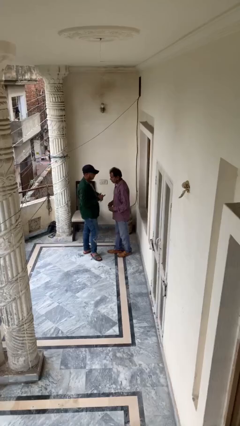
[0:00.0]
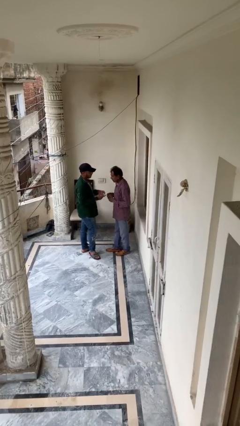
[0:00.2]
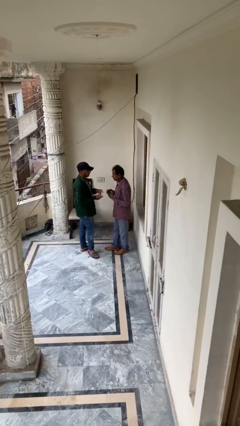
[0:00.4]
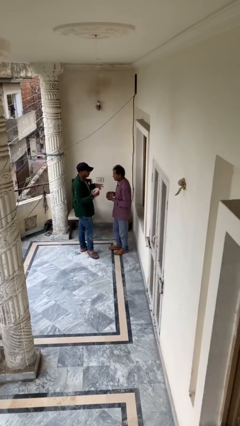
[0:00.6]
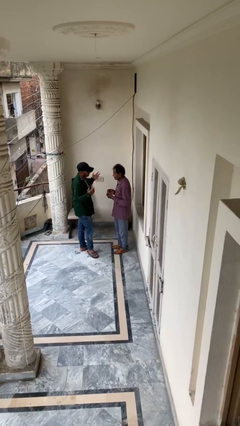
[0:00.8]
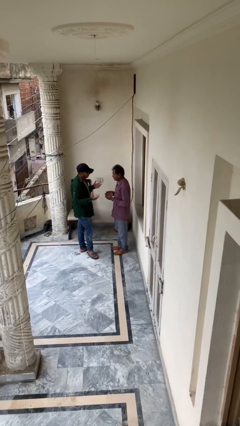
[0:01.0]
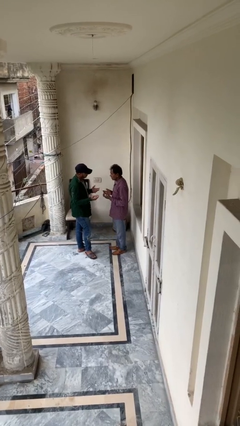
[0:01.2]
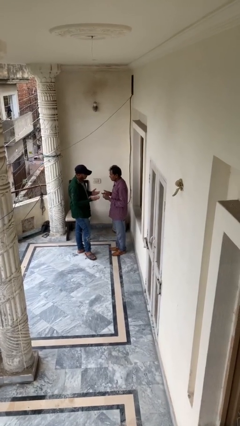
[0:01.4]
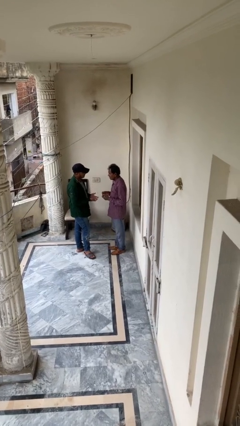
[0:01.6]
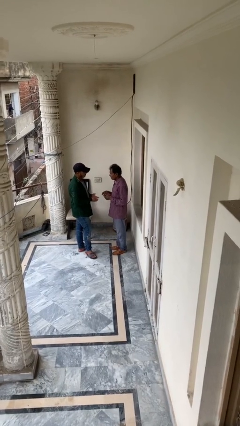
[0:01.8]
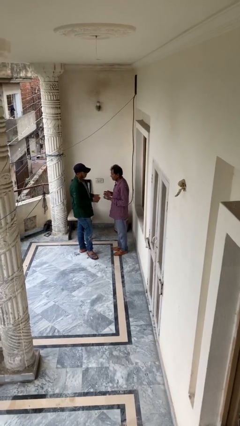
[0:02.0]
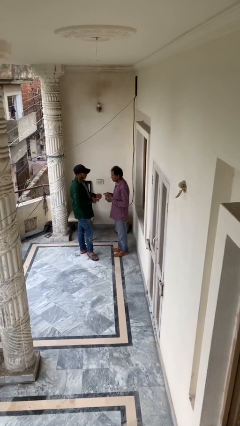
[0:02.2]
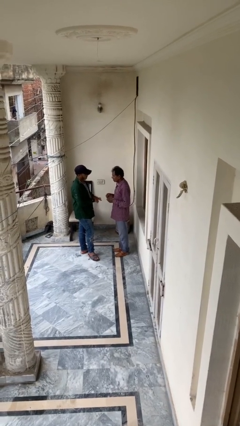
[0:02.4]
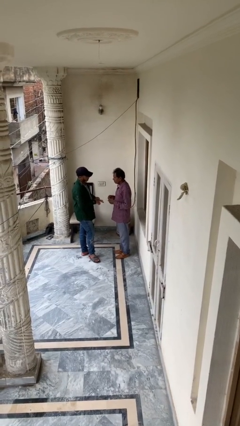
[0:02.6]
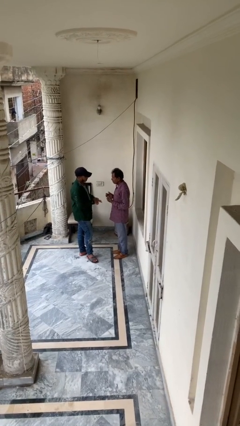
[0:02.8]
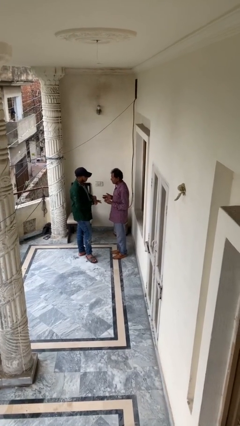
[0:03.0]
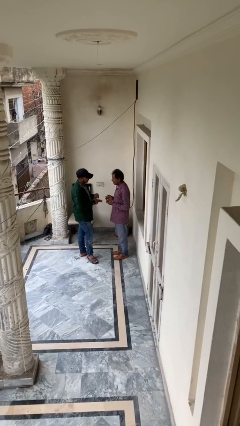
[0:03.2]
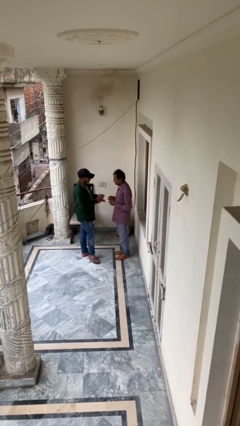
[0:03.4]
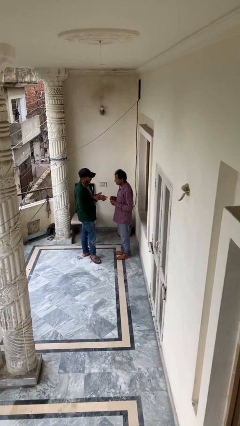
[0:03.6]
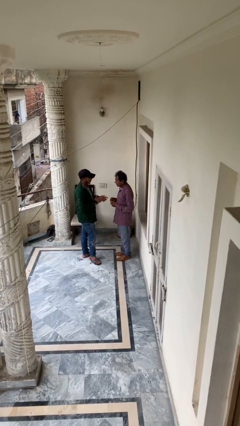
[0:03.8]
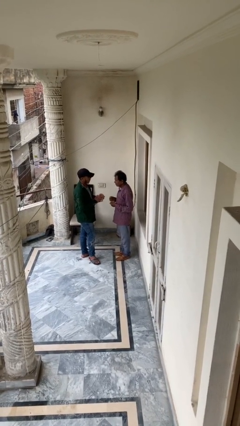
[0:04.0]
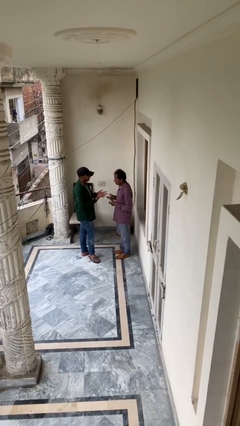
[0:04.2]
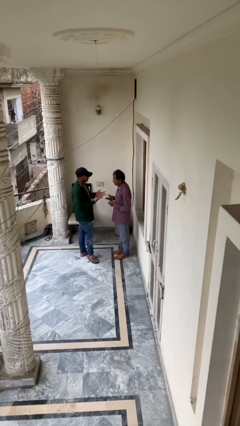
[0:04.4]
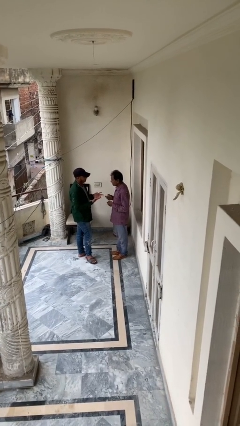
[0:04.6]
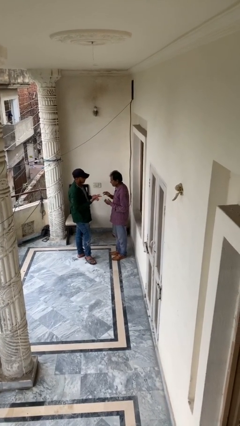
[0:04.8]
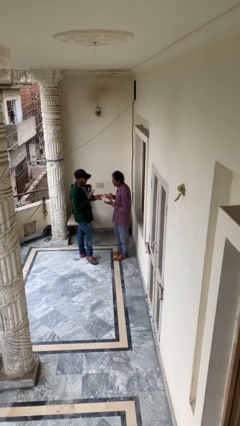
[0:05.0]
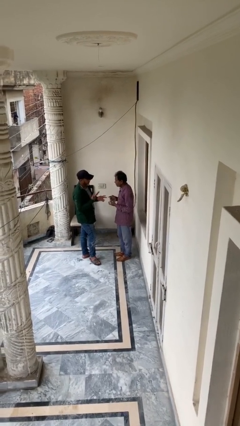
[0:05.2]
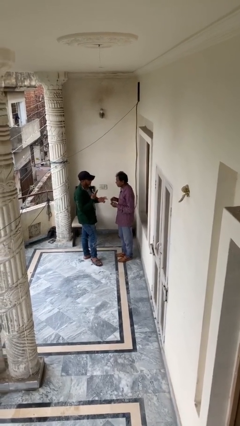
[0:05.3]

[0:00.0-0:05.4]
person talks to person

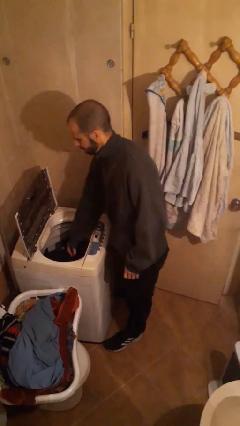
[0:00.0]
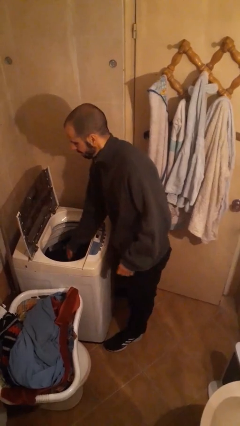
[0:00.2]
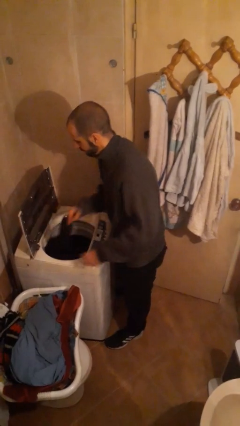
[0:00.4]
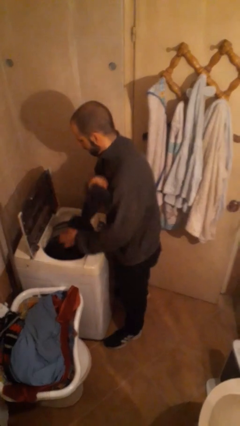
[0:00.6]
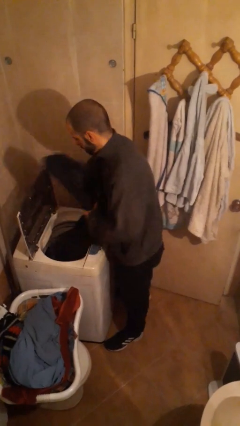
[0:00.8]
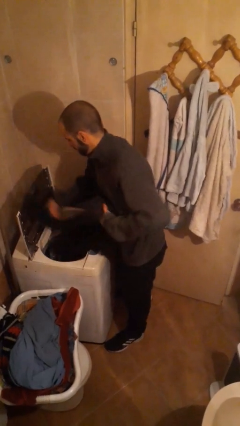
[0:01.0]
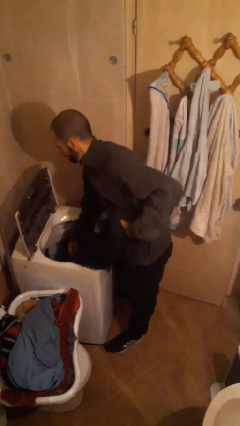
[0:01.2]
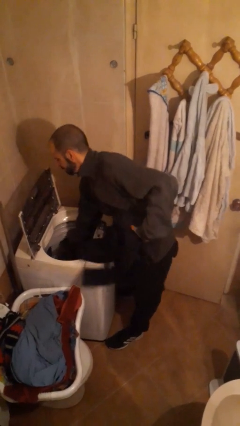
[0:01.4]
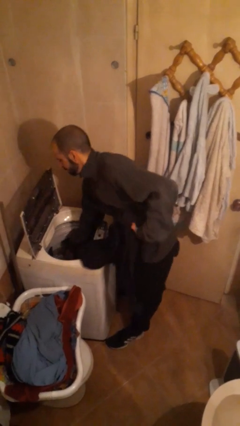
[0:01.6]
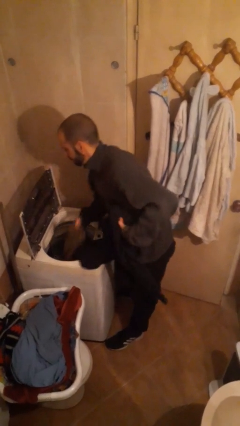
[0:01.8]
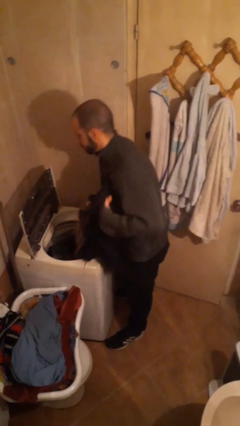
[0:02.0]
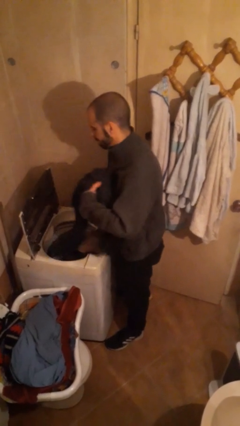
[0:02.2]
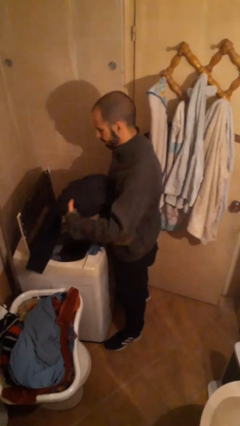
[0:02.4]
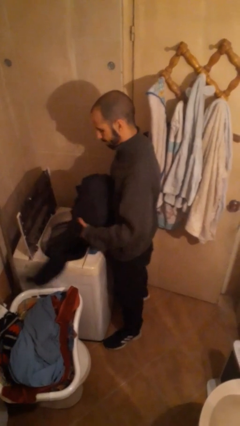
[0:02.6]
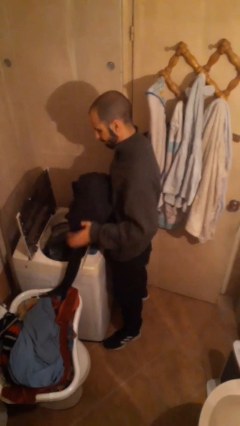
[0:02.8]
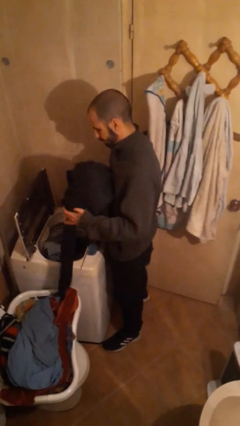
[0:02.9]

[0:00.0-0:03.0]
person loads clotheswasher

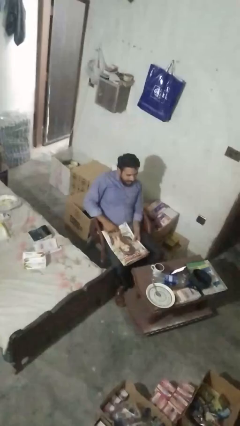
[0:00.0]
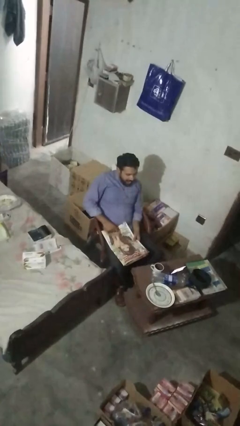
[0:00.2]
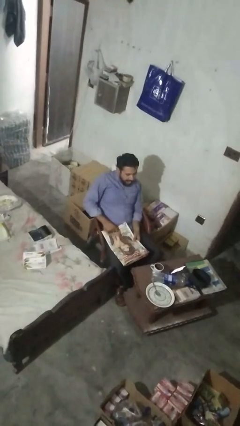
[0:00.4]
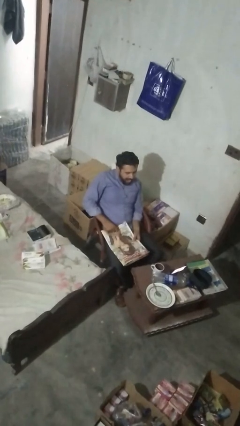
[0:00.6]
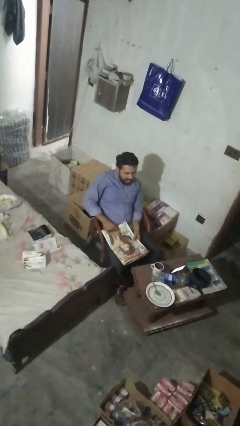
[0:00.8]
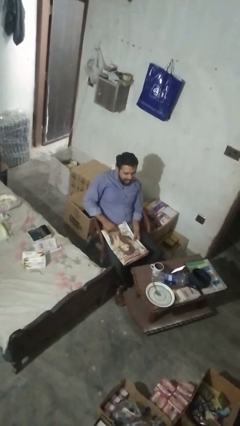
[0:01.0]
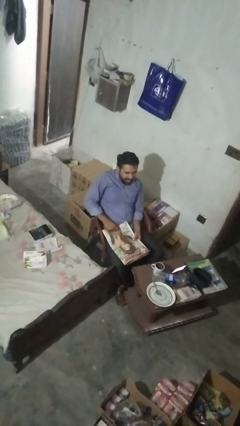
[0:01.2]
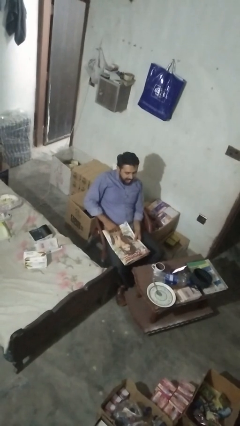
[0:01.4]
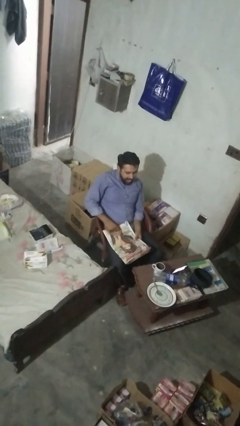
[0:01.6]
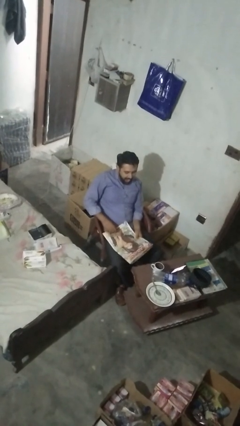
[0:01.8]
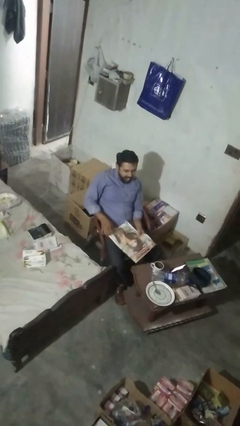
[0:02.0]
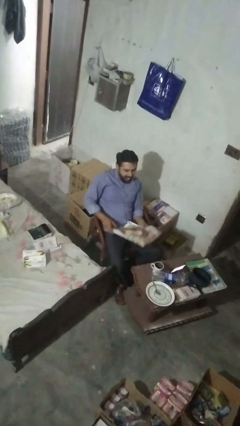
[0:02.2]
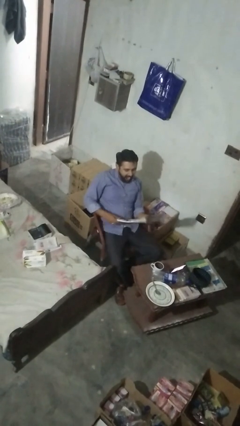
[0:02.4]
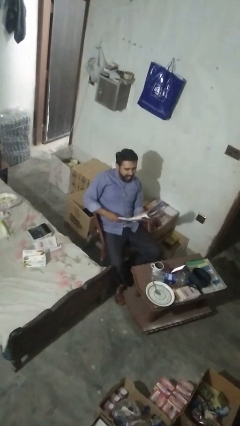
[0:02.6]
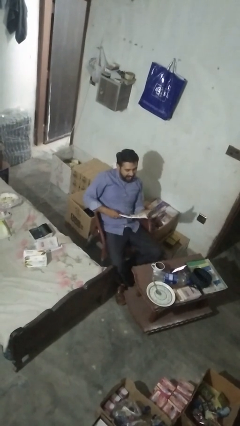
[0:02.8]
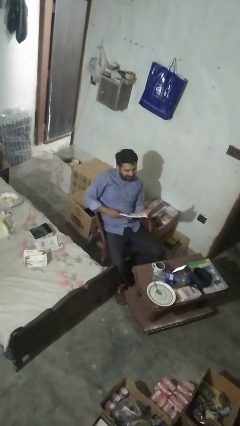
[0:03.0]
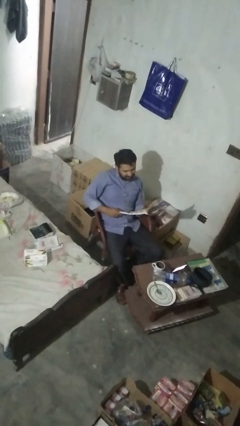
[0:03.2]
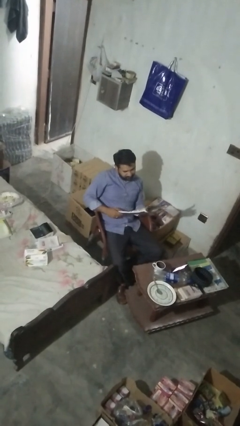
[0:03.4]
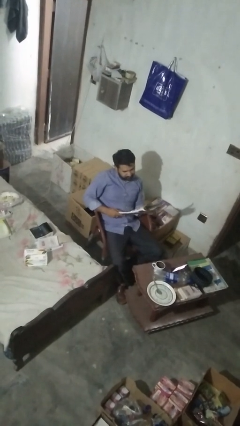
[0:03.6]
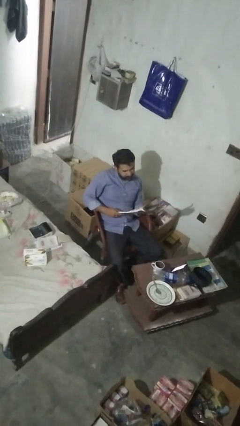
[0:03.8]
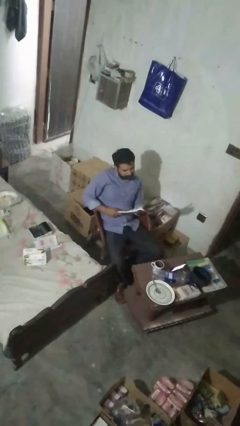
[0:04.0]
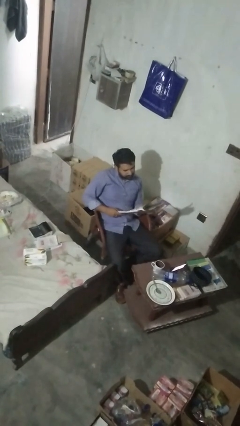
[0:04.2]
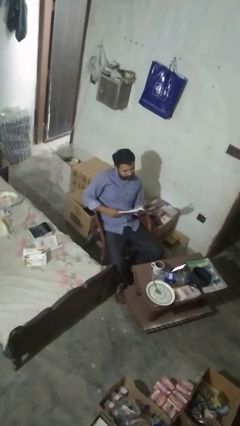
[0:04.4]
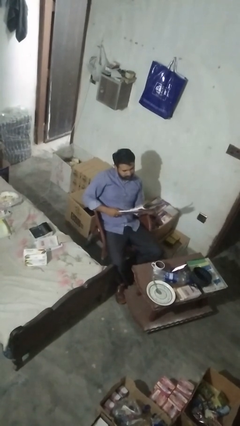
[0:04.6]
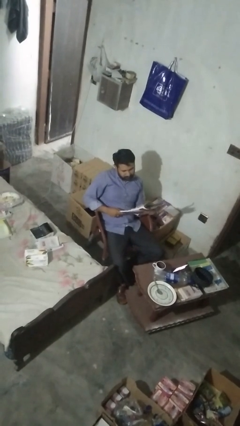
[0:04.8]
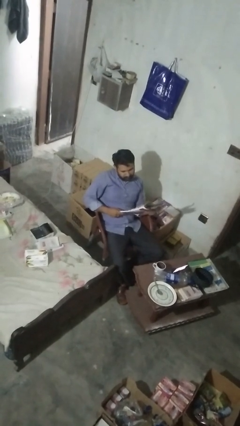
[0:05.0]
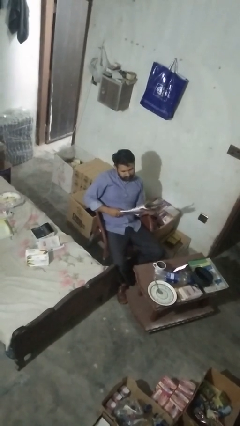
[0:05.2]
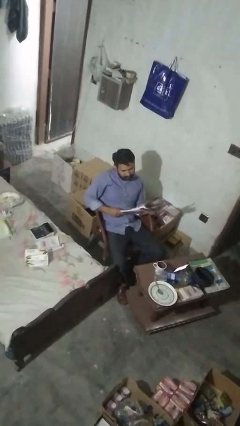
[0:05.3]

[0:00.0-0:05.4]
person reads magazine

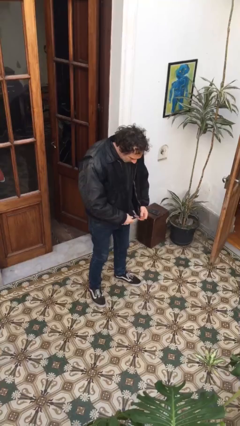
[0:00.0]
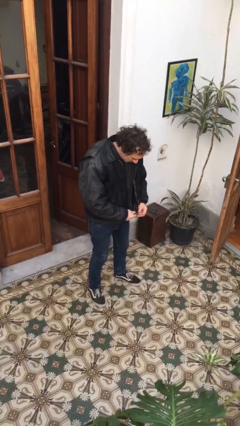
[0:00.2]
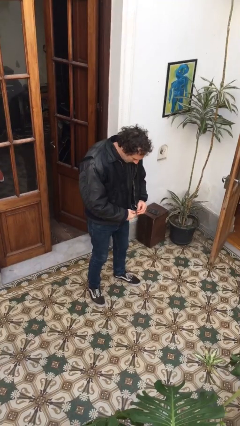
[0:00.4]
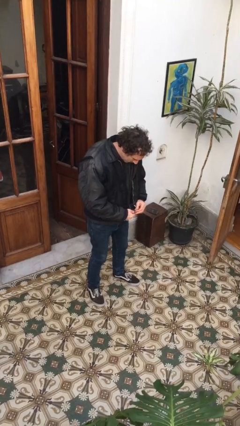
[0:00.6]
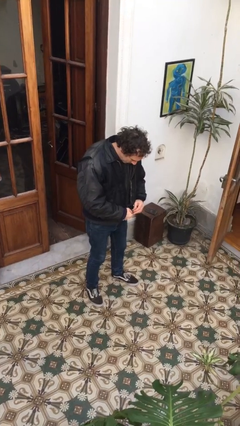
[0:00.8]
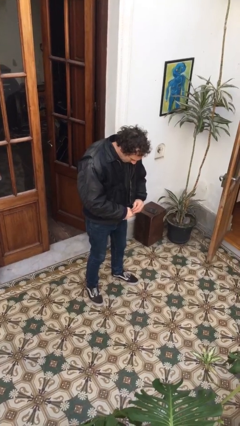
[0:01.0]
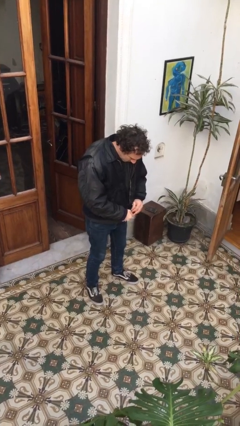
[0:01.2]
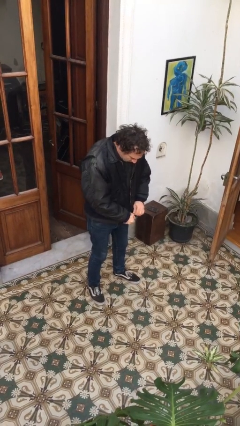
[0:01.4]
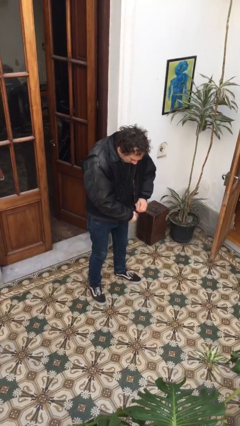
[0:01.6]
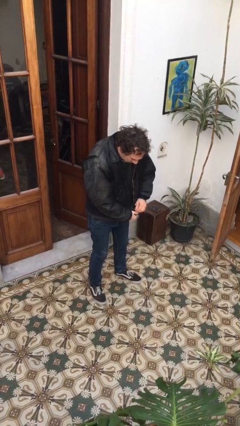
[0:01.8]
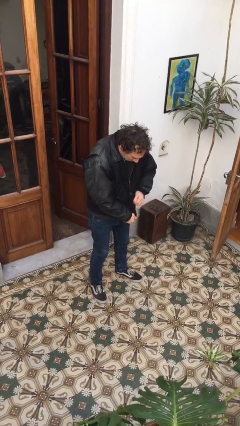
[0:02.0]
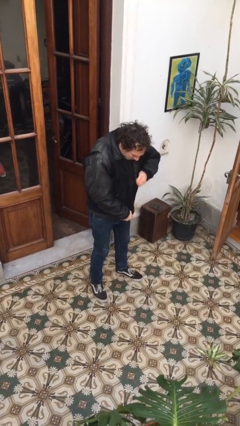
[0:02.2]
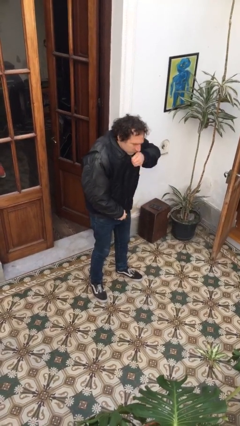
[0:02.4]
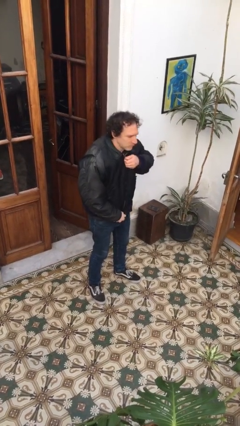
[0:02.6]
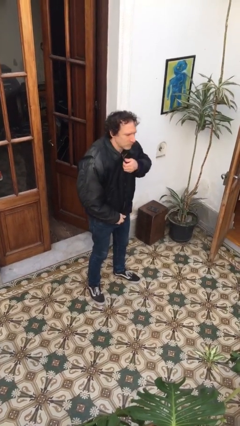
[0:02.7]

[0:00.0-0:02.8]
person zips up jacket

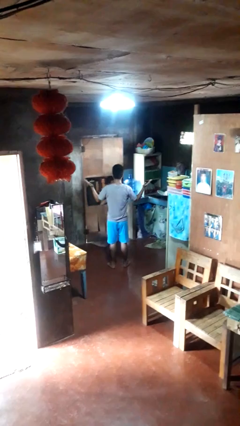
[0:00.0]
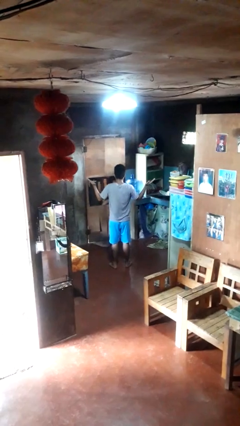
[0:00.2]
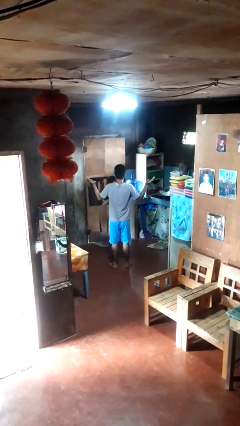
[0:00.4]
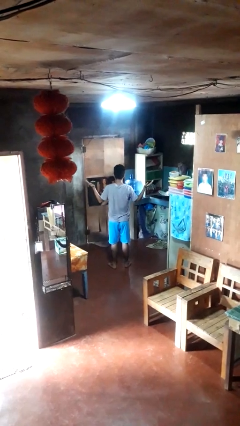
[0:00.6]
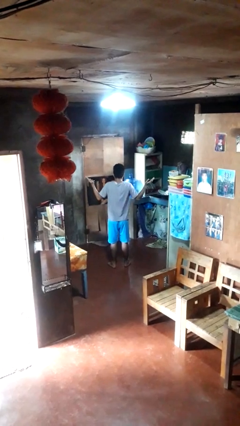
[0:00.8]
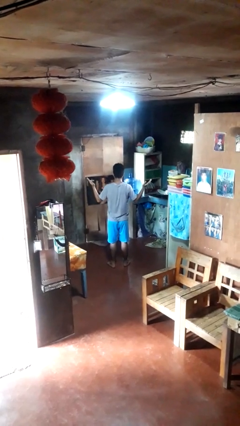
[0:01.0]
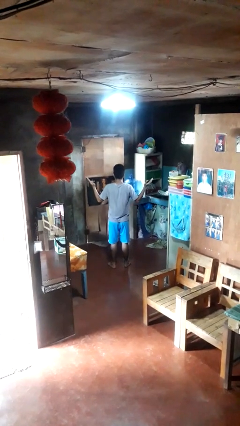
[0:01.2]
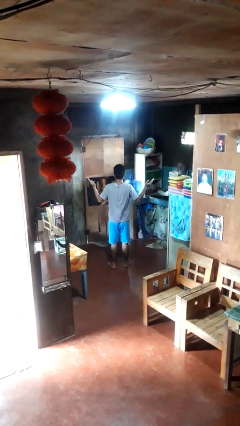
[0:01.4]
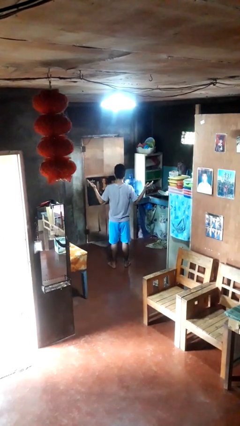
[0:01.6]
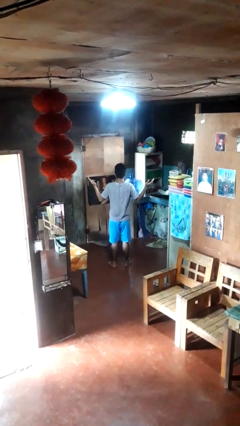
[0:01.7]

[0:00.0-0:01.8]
person shrugs
